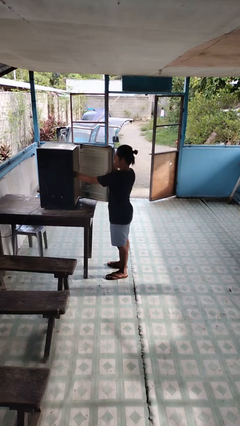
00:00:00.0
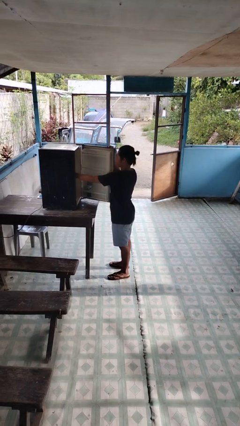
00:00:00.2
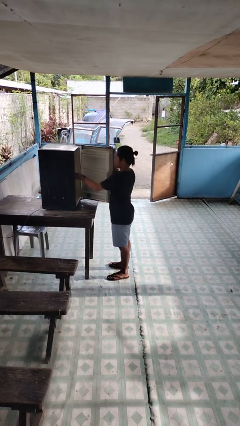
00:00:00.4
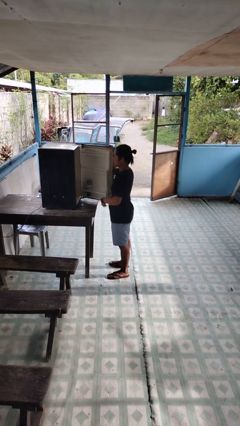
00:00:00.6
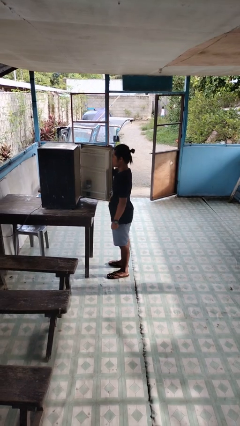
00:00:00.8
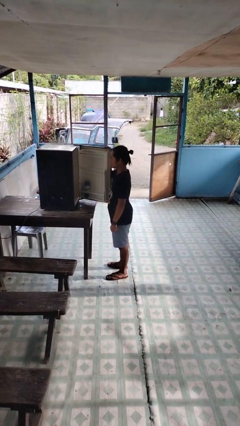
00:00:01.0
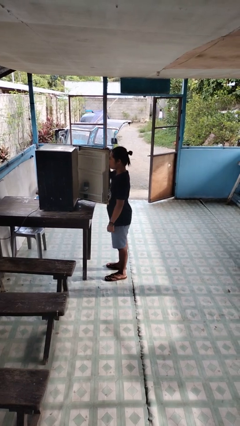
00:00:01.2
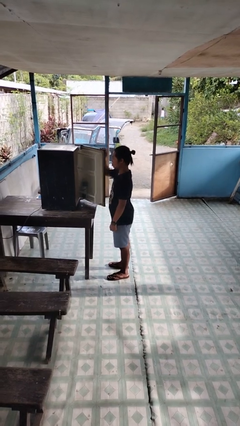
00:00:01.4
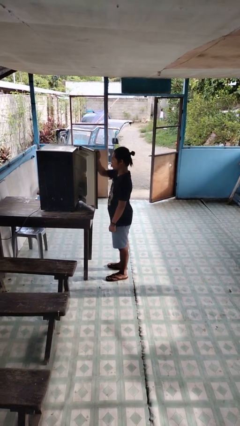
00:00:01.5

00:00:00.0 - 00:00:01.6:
person puts object into refrigerator

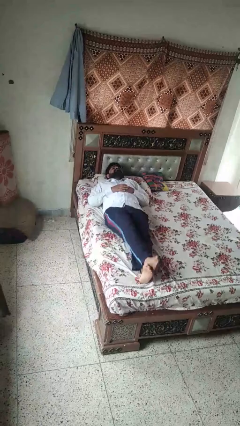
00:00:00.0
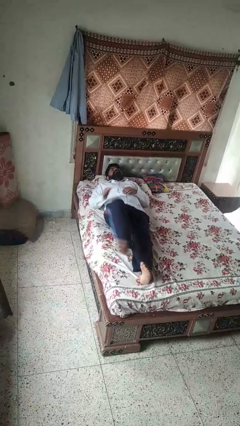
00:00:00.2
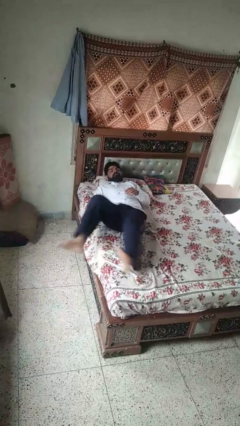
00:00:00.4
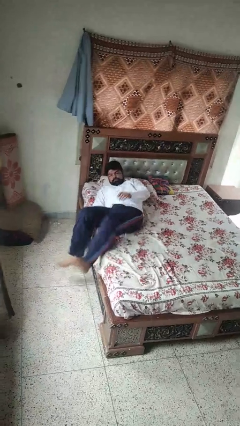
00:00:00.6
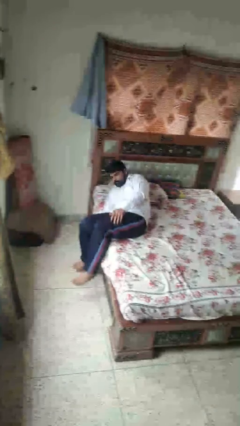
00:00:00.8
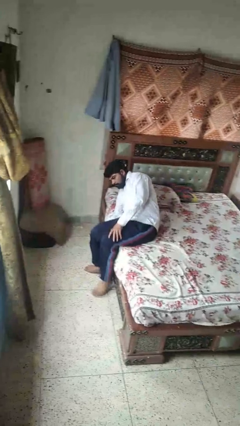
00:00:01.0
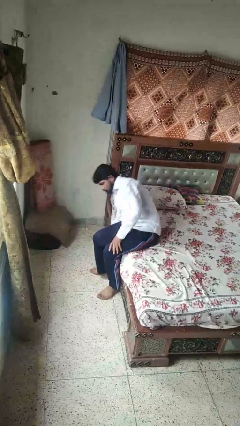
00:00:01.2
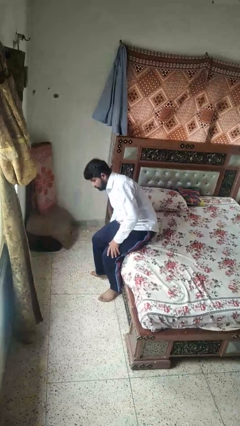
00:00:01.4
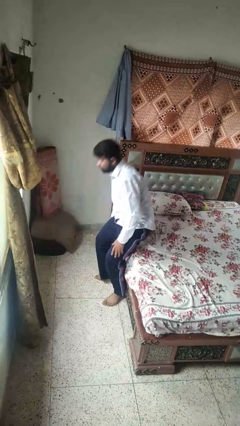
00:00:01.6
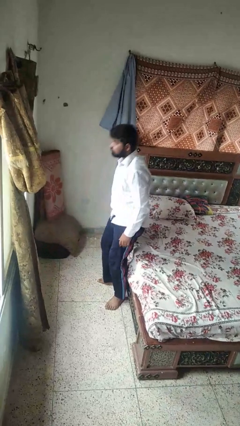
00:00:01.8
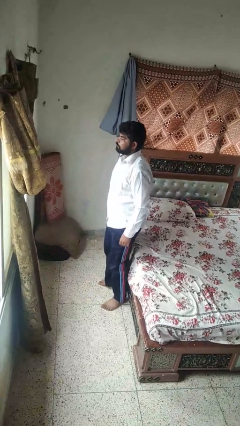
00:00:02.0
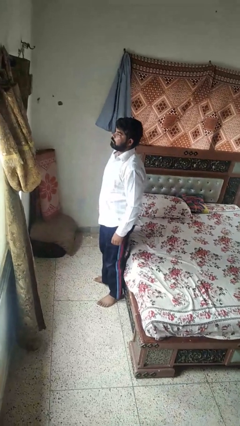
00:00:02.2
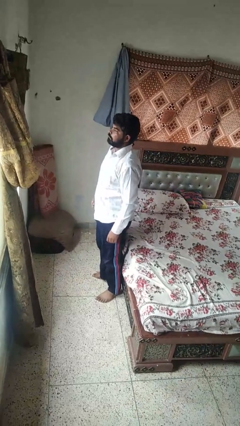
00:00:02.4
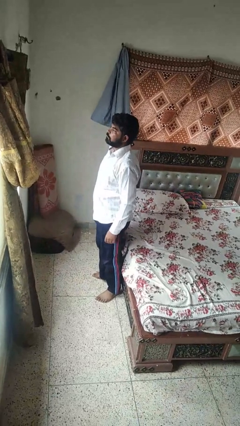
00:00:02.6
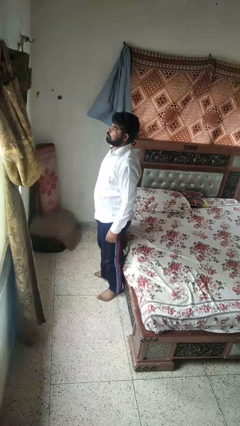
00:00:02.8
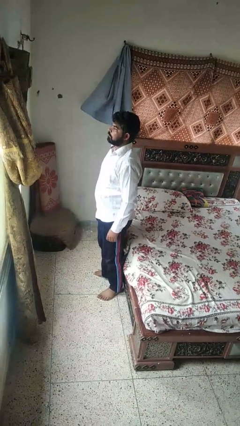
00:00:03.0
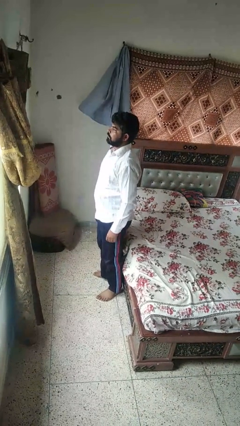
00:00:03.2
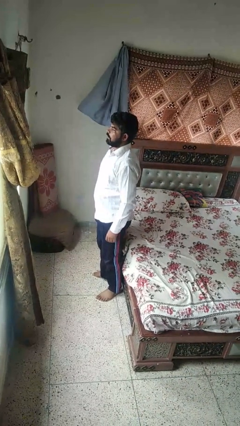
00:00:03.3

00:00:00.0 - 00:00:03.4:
person stands up

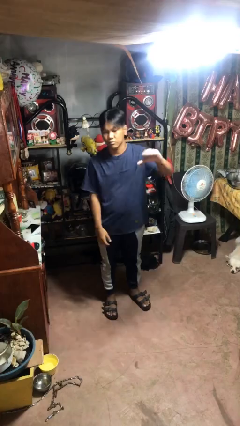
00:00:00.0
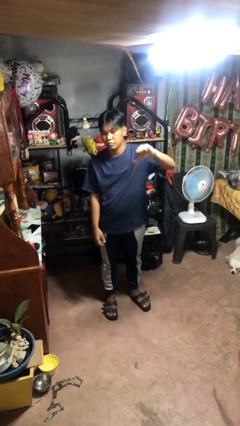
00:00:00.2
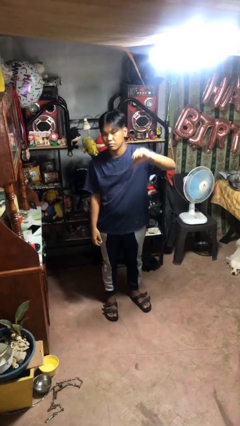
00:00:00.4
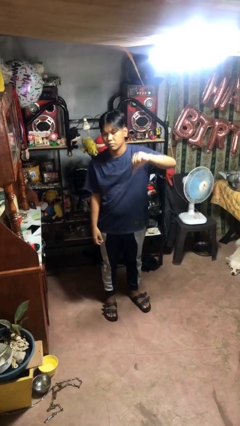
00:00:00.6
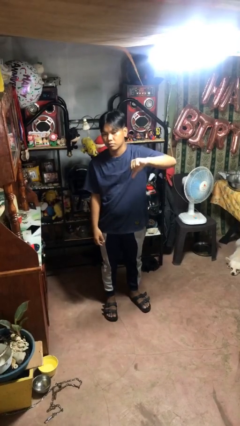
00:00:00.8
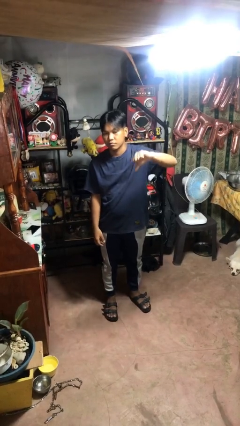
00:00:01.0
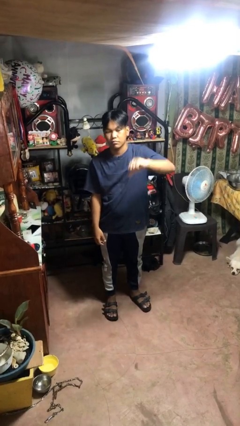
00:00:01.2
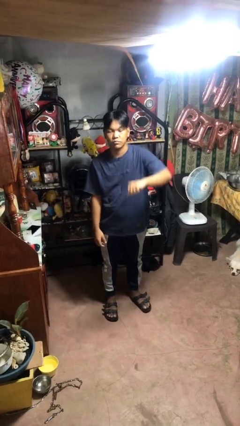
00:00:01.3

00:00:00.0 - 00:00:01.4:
person gestures thumbs down

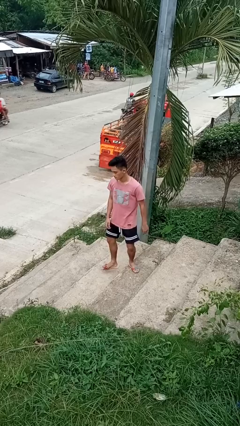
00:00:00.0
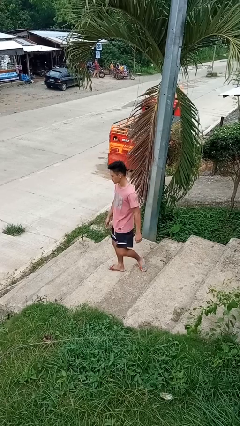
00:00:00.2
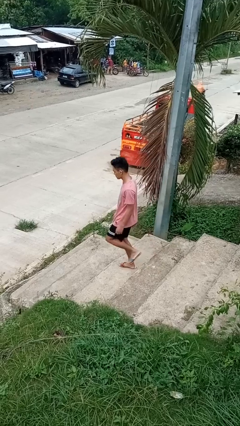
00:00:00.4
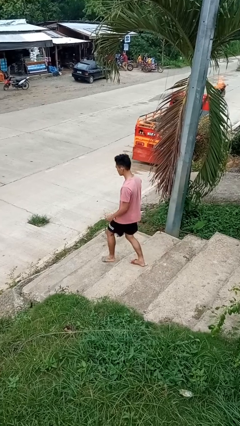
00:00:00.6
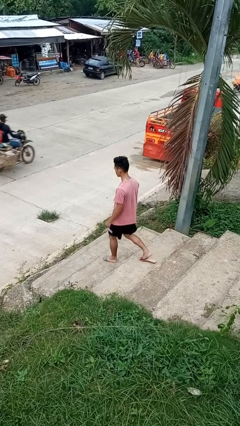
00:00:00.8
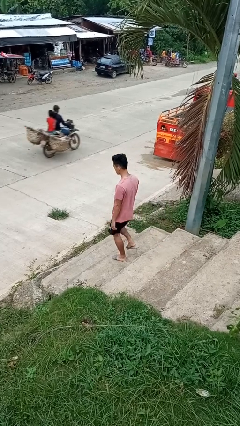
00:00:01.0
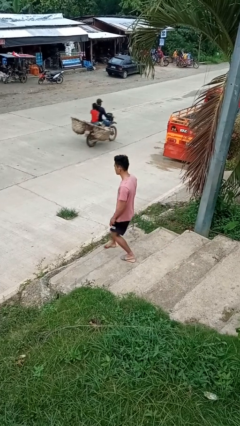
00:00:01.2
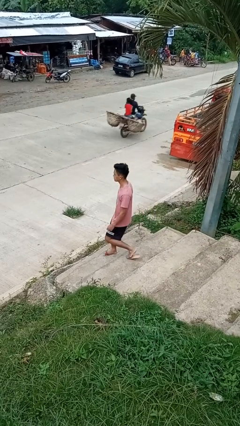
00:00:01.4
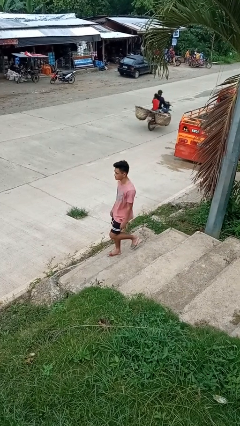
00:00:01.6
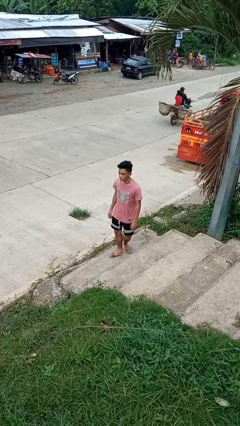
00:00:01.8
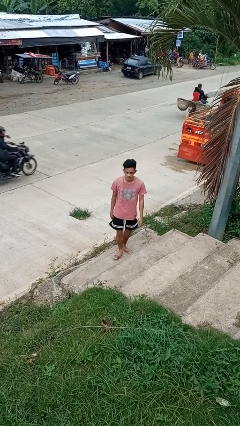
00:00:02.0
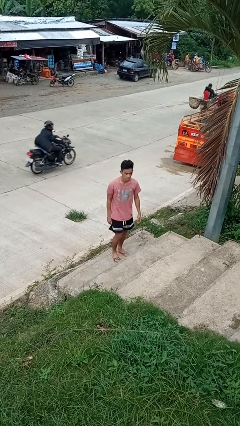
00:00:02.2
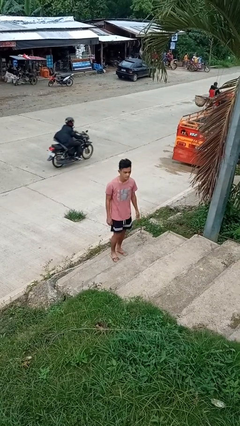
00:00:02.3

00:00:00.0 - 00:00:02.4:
person climbs down stairs

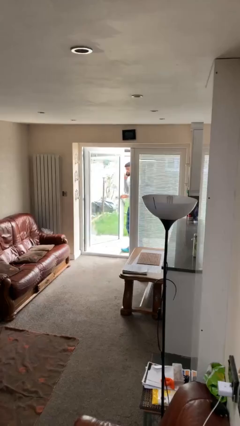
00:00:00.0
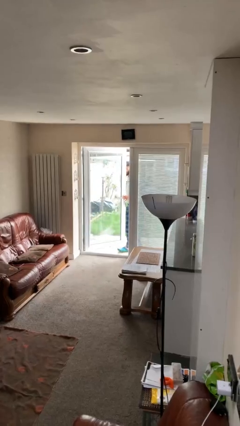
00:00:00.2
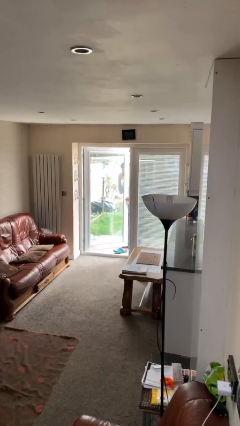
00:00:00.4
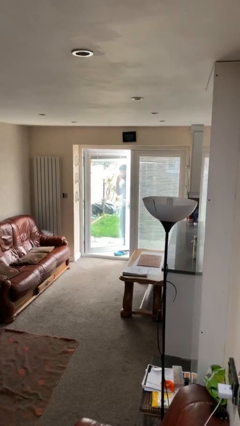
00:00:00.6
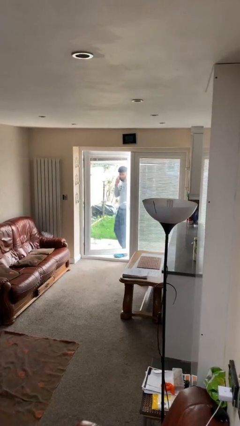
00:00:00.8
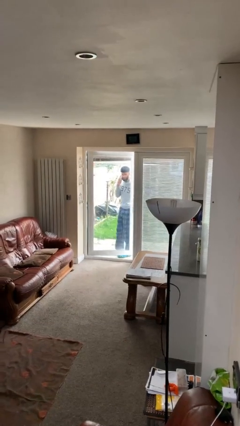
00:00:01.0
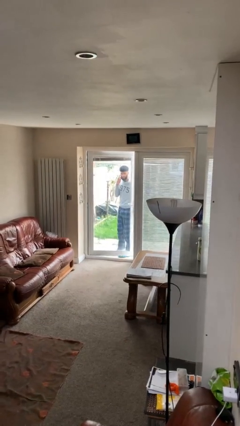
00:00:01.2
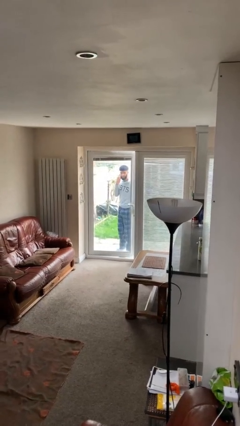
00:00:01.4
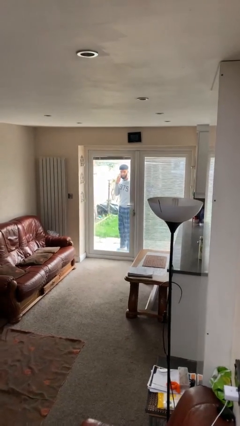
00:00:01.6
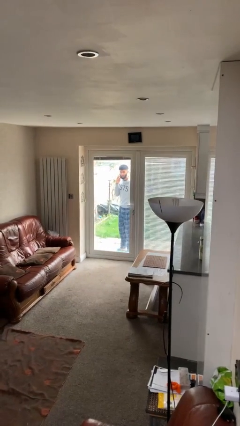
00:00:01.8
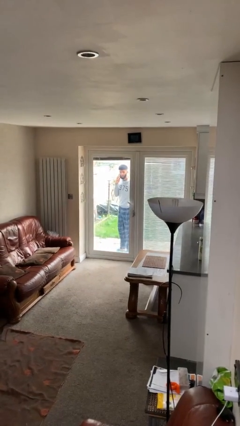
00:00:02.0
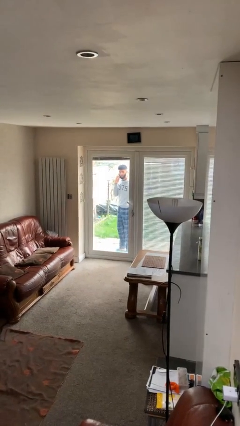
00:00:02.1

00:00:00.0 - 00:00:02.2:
person closes facility door

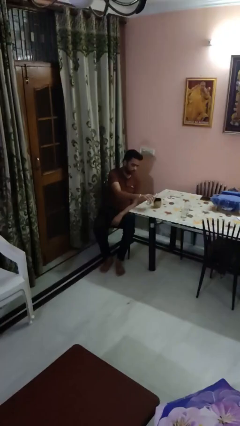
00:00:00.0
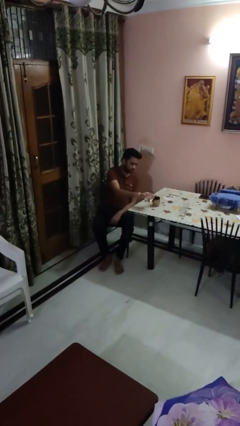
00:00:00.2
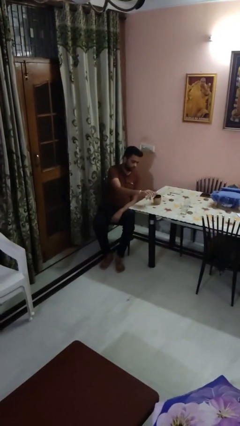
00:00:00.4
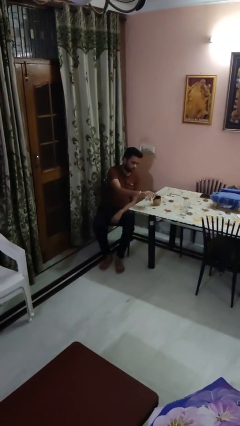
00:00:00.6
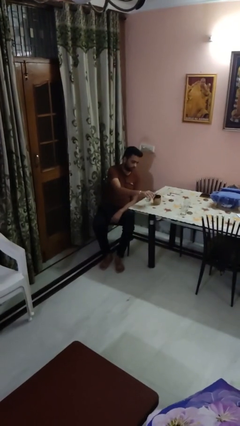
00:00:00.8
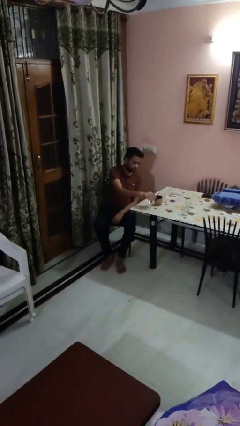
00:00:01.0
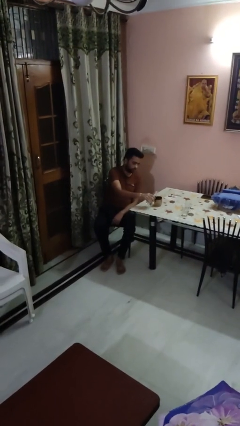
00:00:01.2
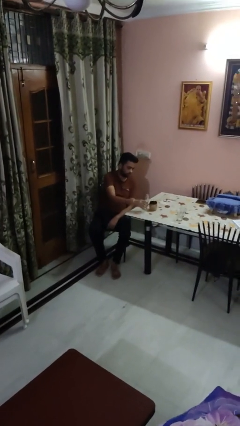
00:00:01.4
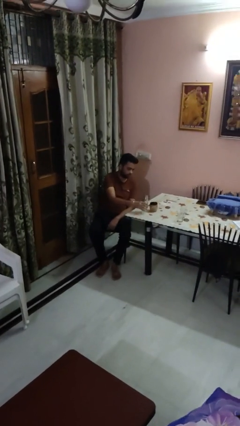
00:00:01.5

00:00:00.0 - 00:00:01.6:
person pours liquid into cup

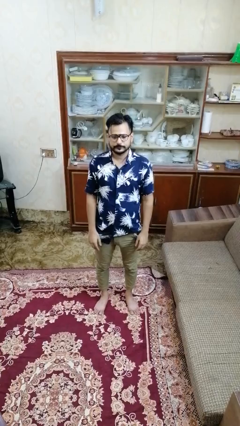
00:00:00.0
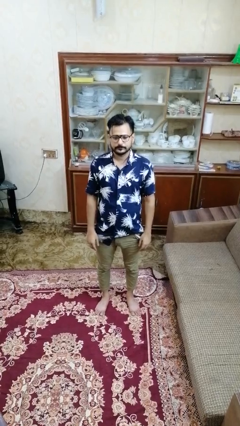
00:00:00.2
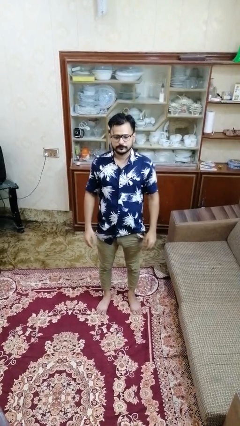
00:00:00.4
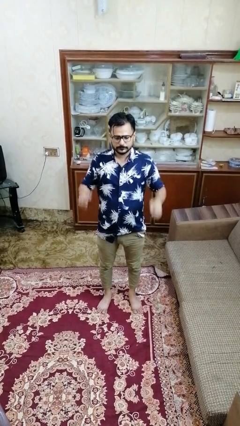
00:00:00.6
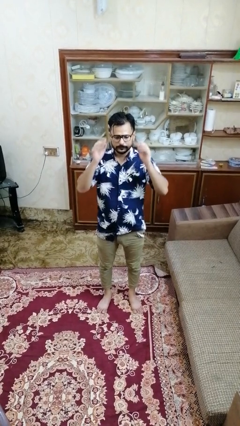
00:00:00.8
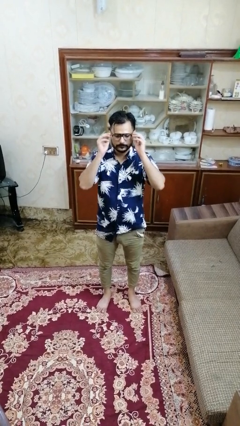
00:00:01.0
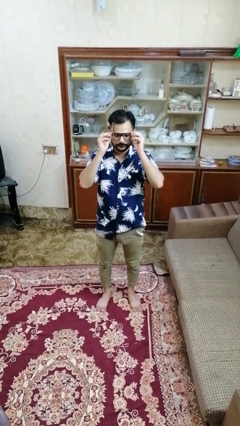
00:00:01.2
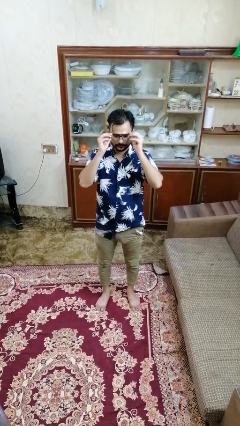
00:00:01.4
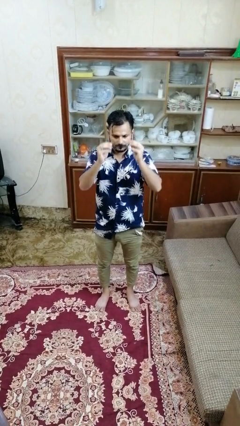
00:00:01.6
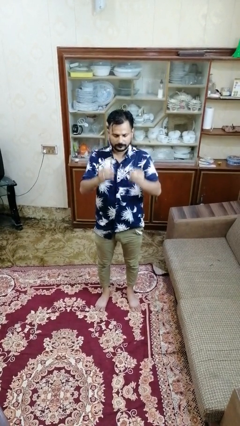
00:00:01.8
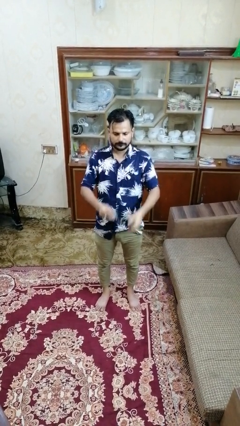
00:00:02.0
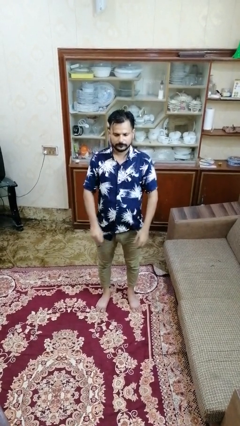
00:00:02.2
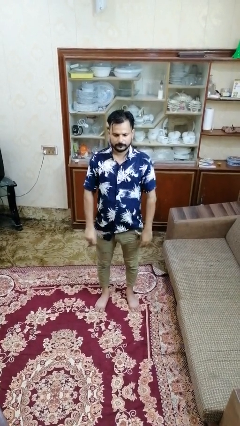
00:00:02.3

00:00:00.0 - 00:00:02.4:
person takes off glasses

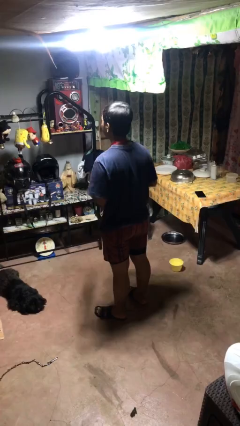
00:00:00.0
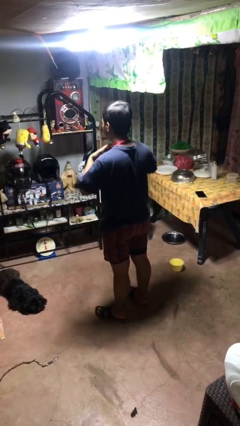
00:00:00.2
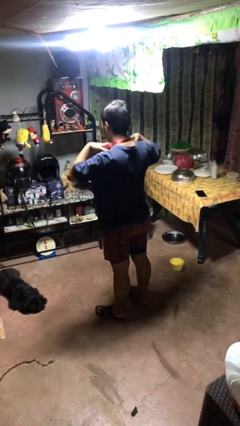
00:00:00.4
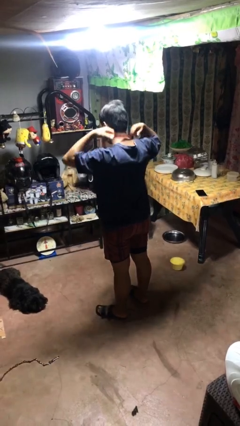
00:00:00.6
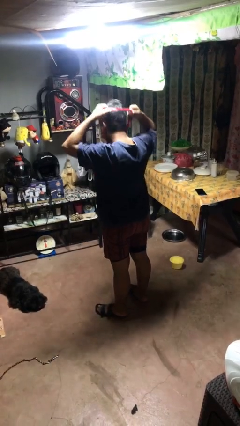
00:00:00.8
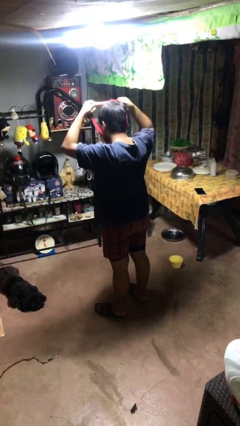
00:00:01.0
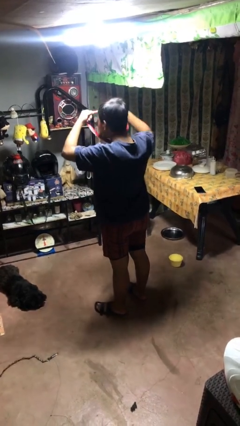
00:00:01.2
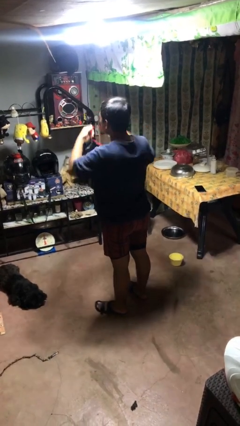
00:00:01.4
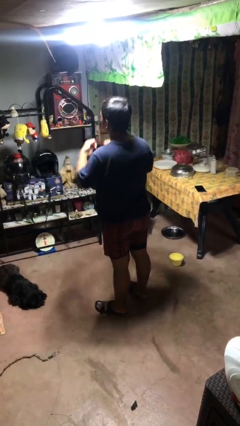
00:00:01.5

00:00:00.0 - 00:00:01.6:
person takes off necklace
